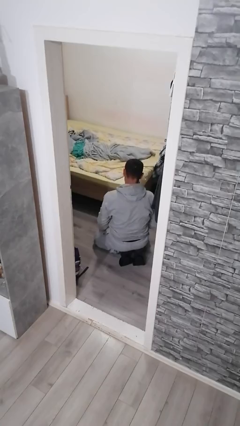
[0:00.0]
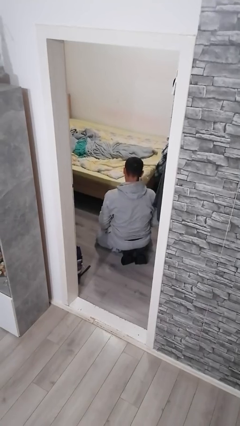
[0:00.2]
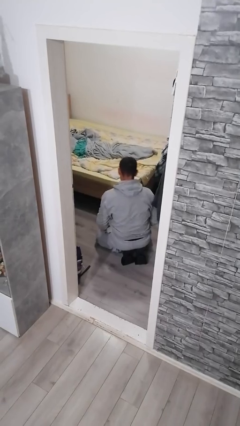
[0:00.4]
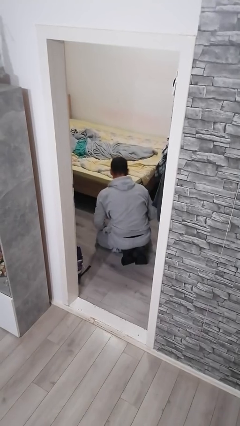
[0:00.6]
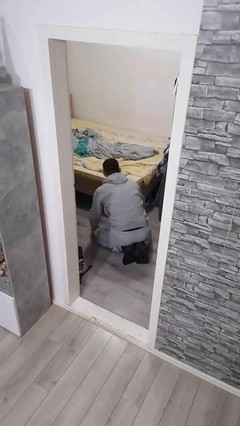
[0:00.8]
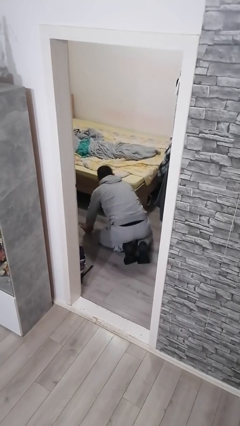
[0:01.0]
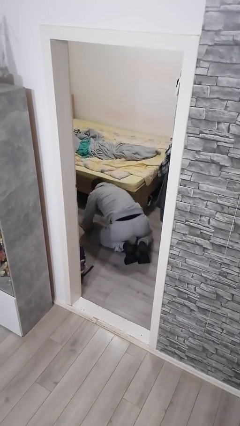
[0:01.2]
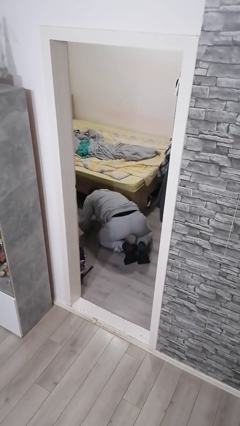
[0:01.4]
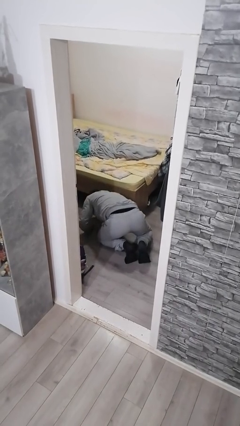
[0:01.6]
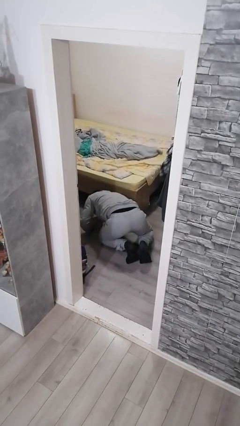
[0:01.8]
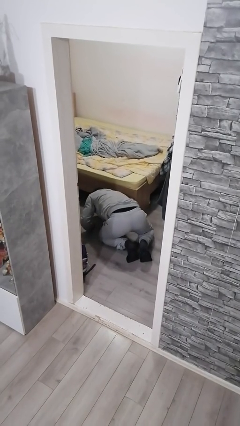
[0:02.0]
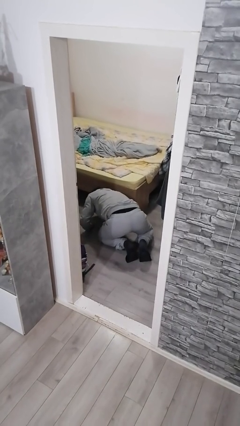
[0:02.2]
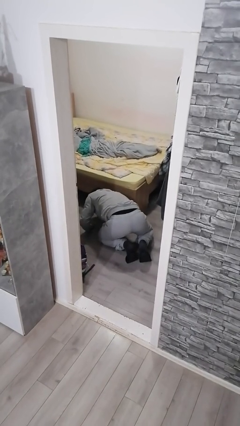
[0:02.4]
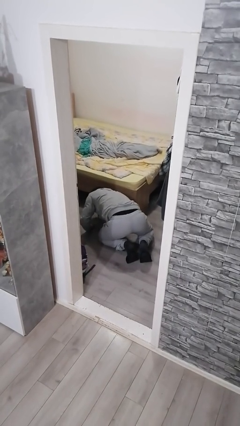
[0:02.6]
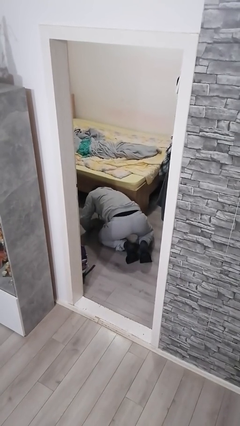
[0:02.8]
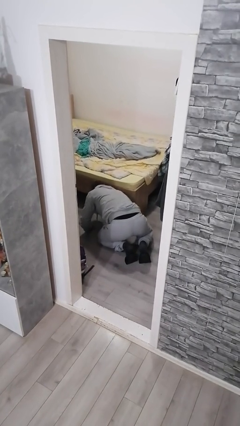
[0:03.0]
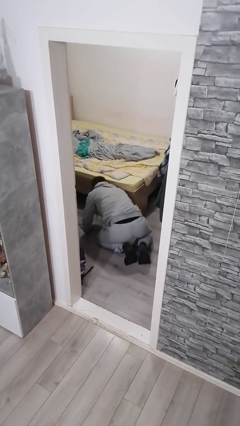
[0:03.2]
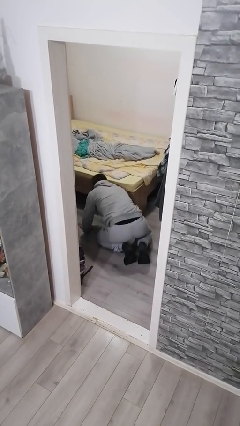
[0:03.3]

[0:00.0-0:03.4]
person searches under bed

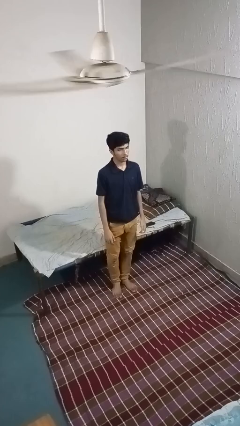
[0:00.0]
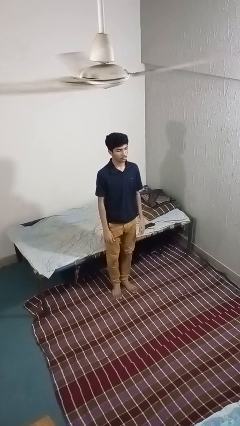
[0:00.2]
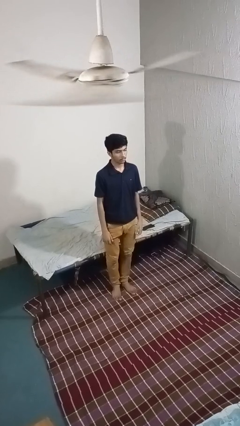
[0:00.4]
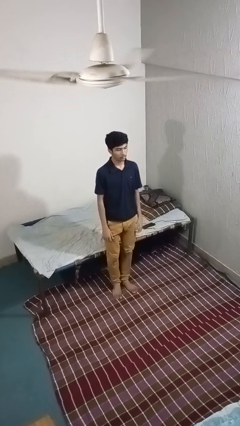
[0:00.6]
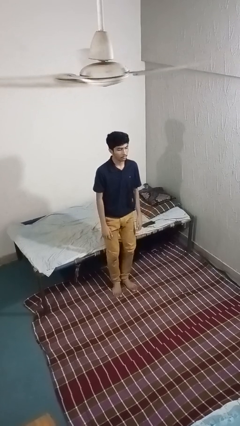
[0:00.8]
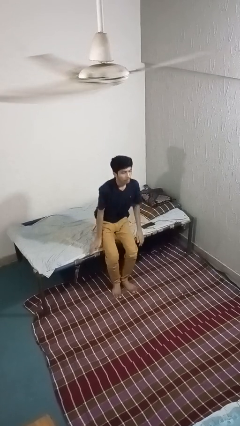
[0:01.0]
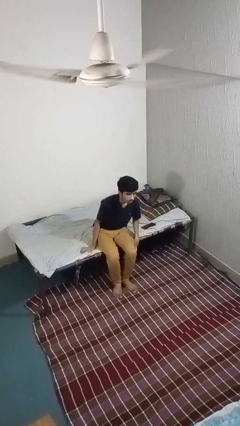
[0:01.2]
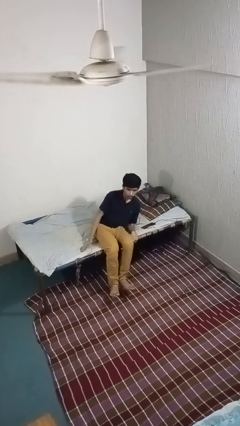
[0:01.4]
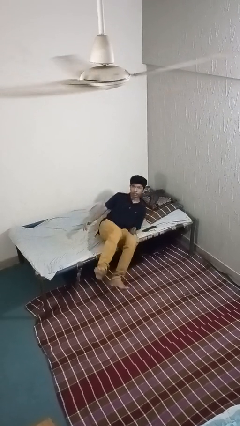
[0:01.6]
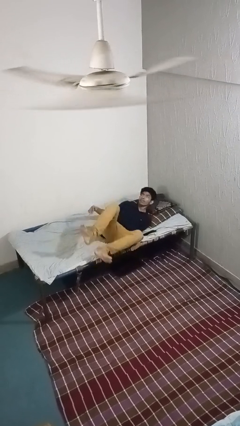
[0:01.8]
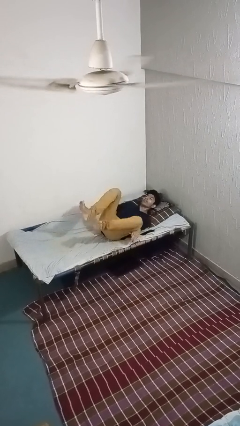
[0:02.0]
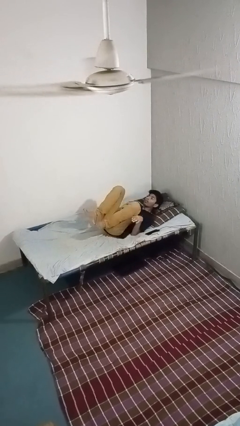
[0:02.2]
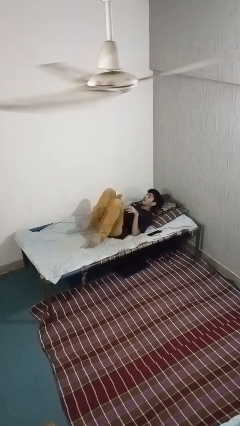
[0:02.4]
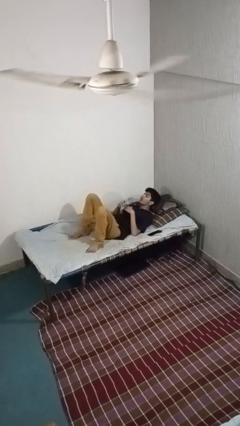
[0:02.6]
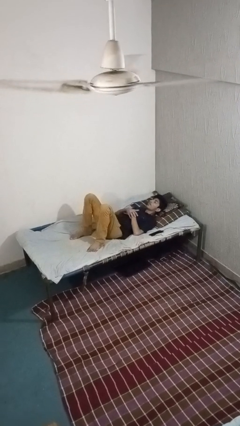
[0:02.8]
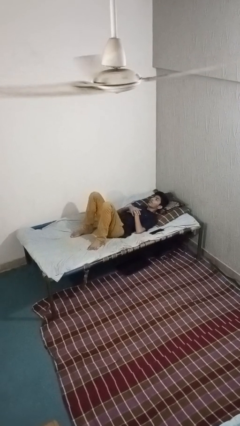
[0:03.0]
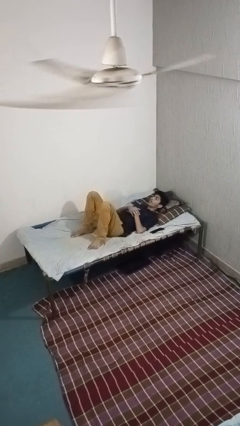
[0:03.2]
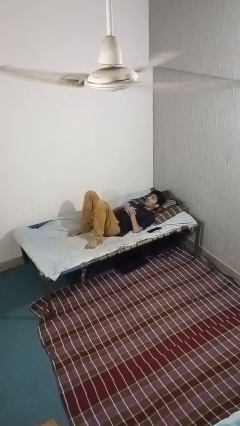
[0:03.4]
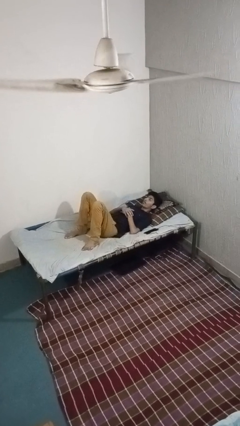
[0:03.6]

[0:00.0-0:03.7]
person lies down on bed

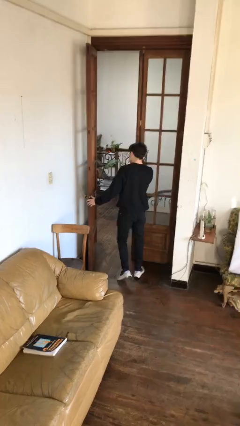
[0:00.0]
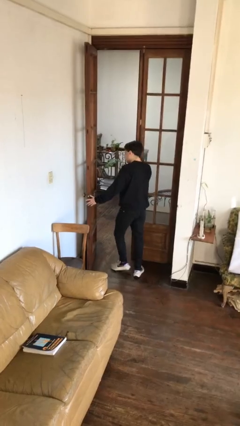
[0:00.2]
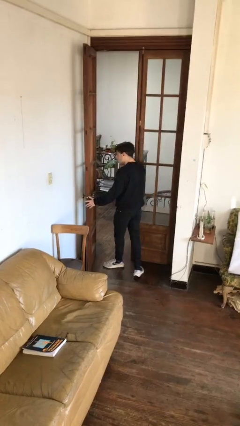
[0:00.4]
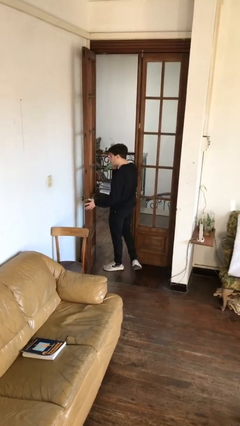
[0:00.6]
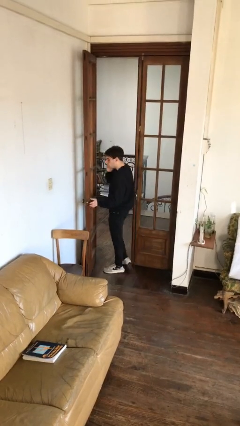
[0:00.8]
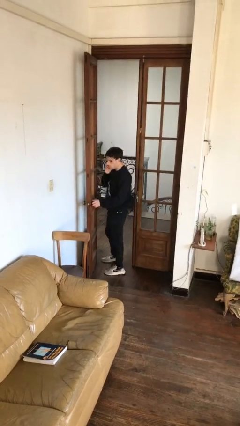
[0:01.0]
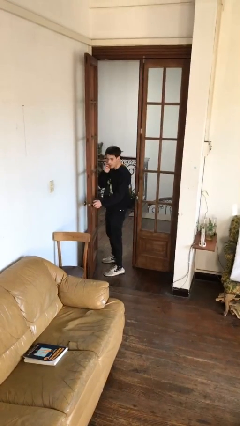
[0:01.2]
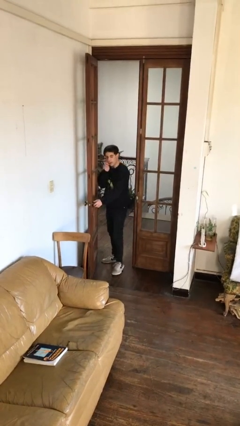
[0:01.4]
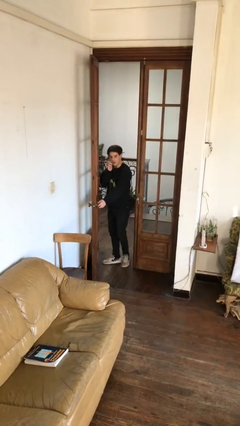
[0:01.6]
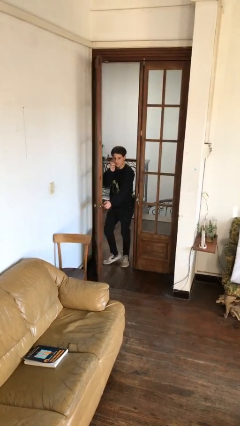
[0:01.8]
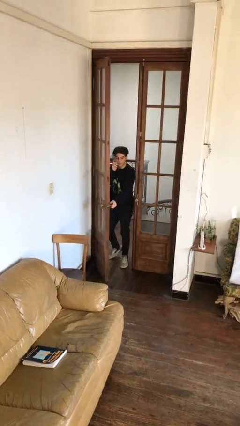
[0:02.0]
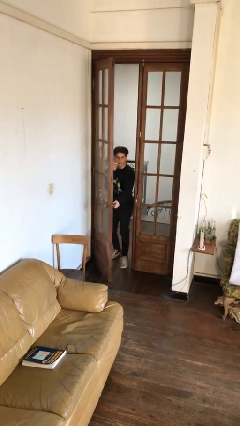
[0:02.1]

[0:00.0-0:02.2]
person exits scene through structure

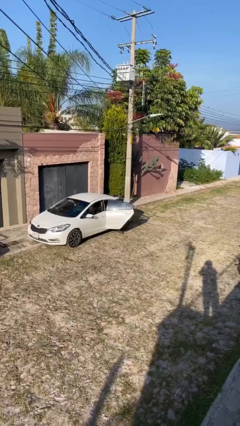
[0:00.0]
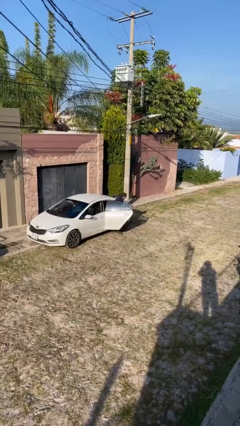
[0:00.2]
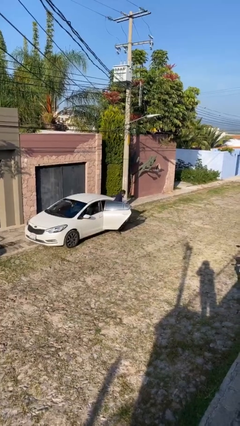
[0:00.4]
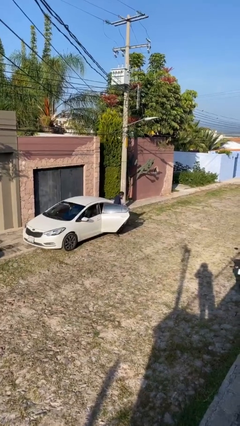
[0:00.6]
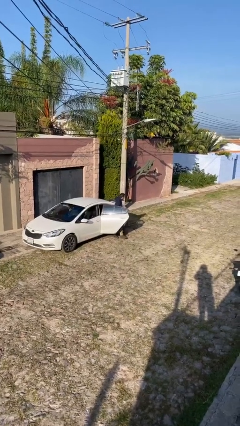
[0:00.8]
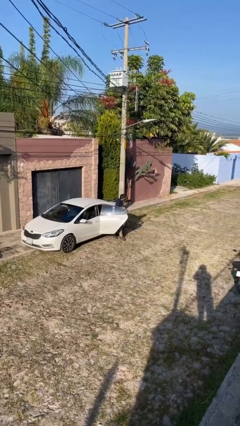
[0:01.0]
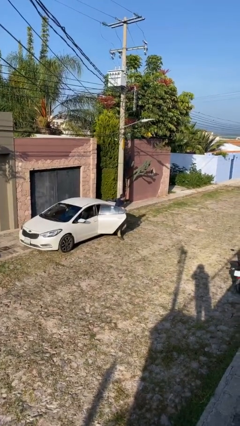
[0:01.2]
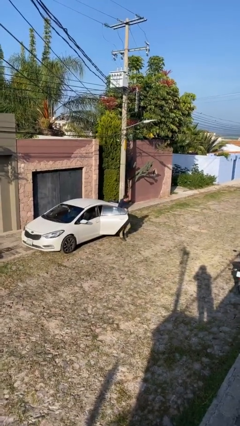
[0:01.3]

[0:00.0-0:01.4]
person exits car

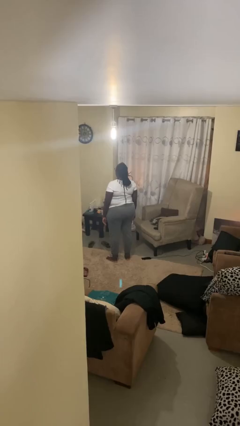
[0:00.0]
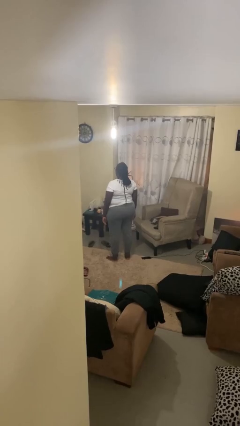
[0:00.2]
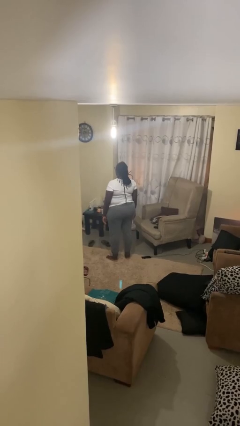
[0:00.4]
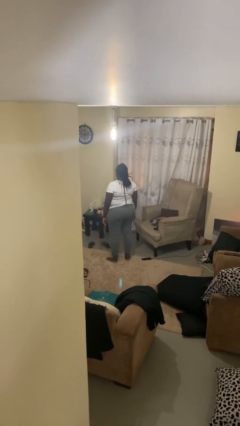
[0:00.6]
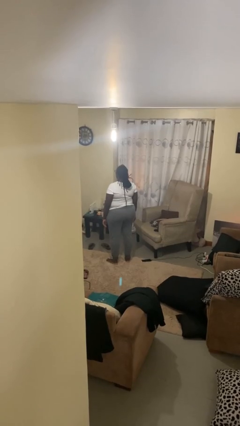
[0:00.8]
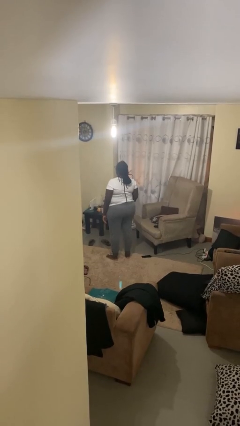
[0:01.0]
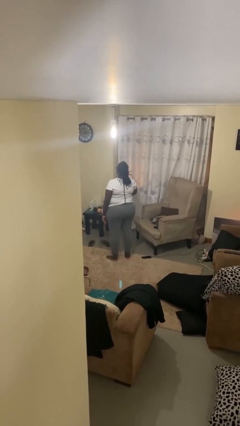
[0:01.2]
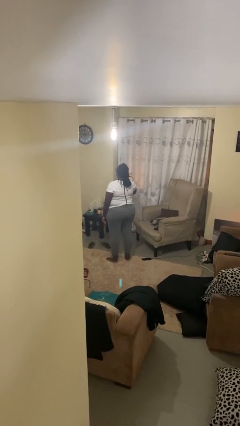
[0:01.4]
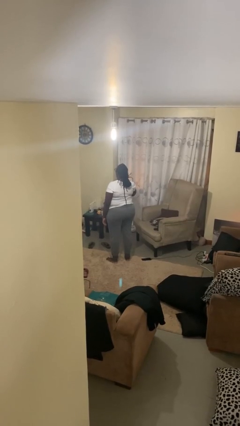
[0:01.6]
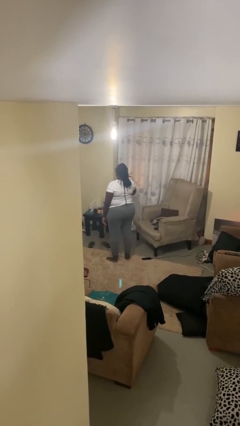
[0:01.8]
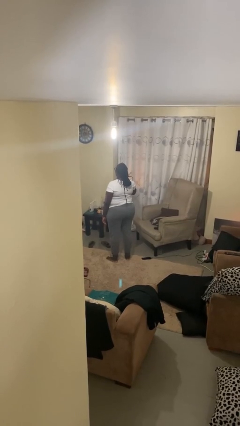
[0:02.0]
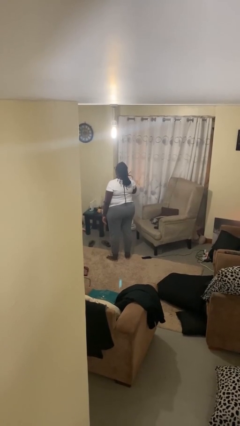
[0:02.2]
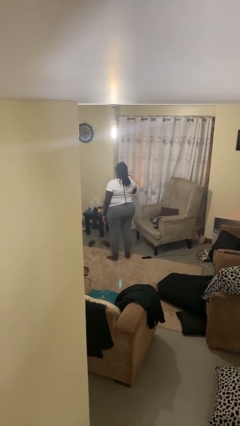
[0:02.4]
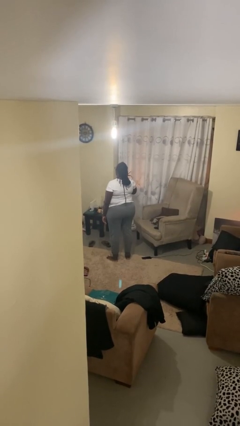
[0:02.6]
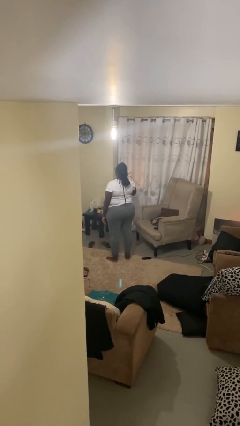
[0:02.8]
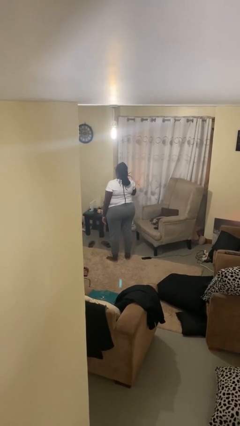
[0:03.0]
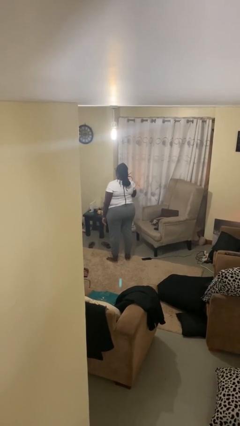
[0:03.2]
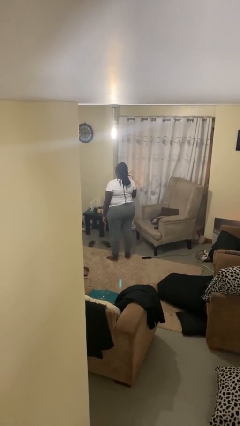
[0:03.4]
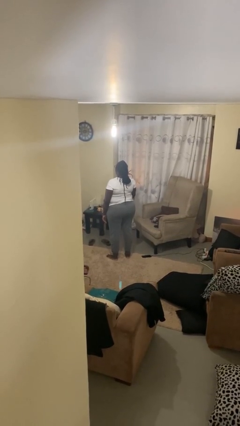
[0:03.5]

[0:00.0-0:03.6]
person drums on chest

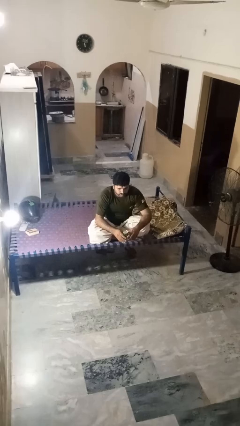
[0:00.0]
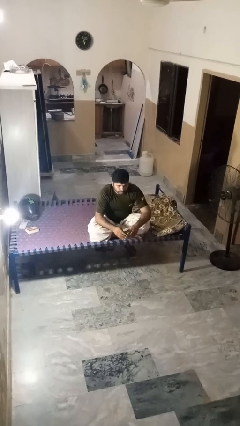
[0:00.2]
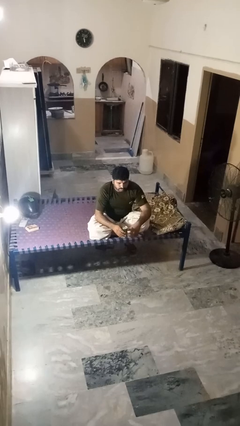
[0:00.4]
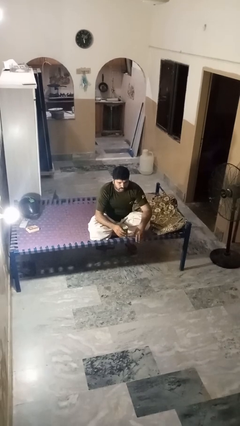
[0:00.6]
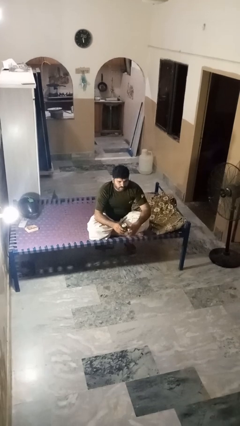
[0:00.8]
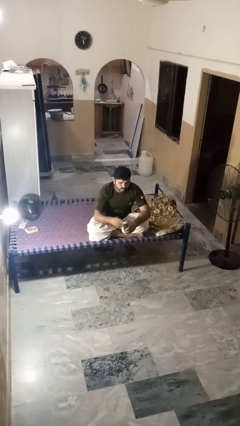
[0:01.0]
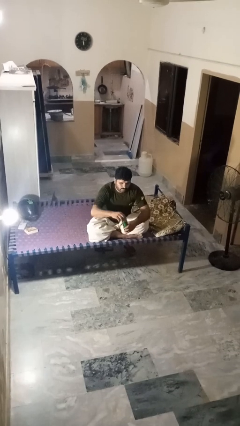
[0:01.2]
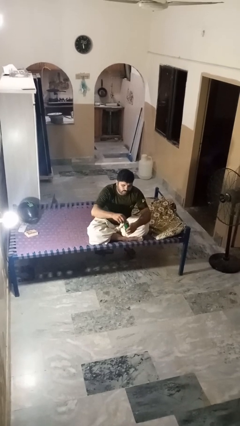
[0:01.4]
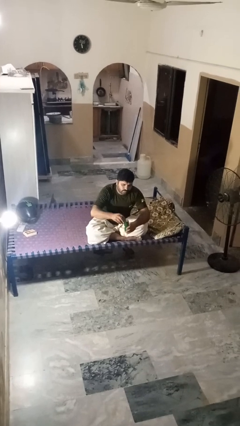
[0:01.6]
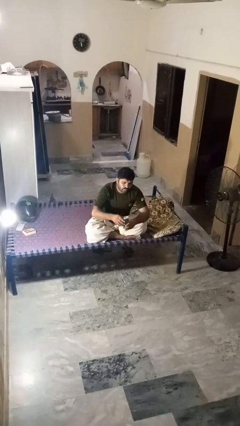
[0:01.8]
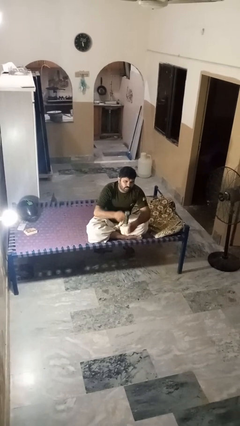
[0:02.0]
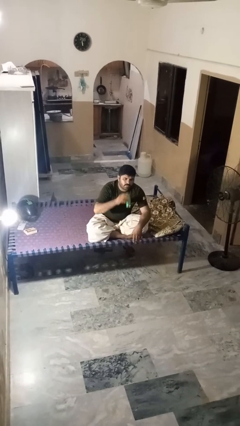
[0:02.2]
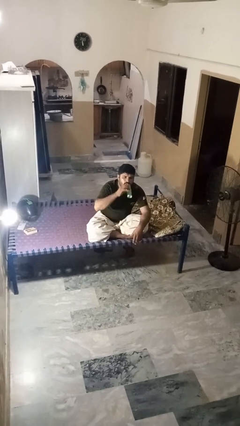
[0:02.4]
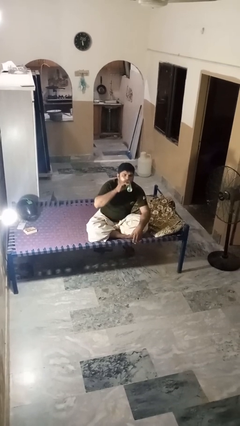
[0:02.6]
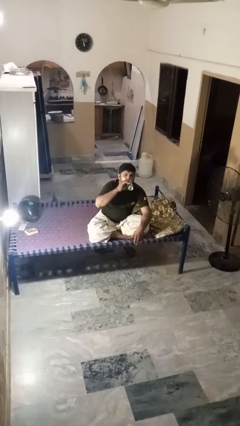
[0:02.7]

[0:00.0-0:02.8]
person opens beverage can
